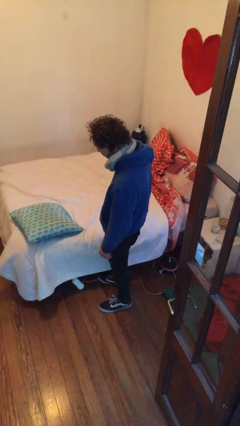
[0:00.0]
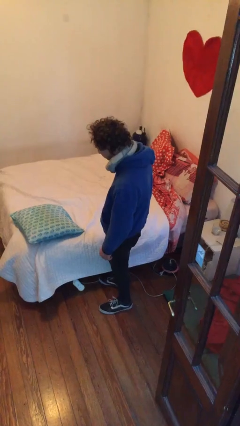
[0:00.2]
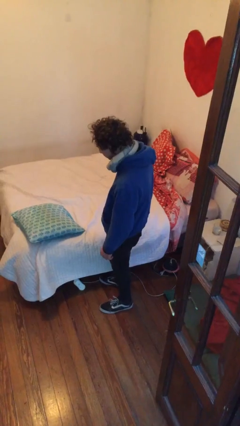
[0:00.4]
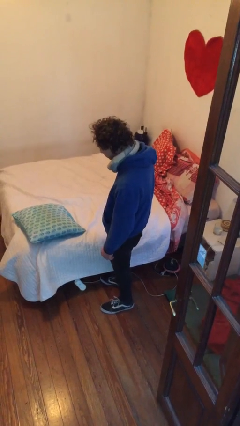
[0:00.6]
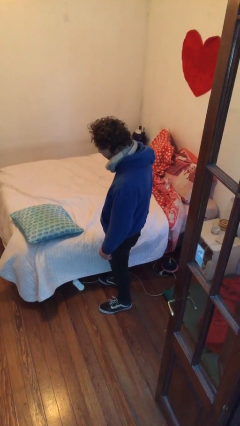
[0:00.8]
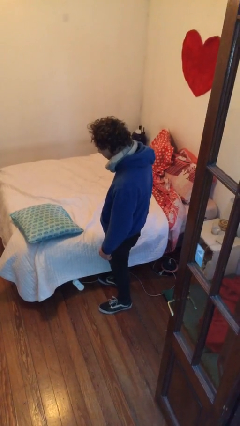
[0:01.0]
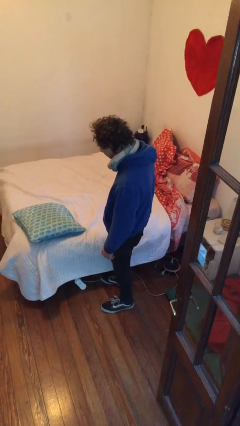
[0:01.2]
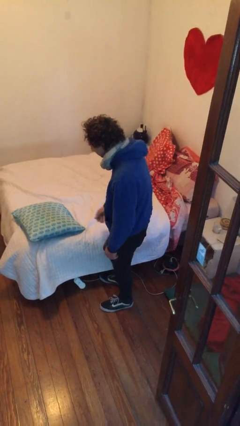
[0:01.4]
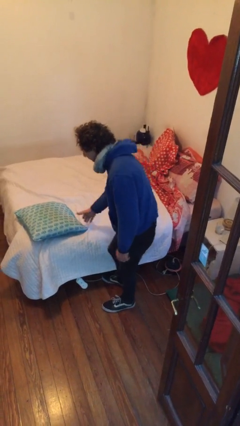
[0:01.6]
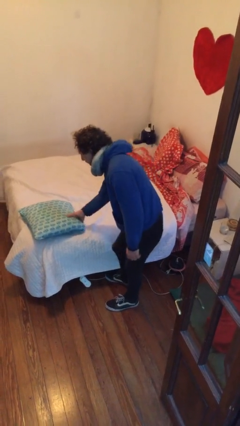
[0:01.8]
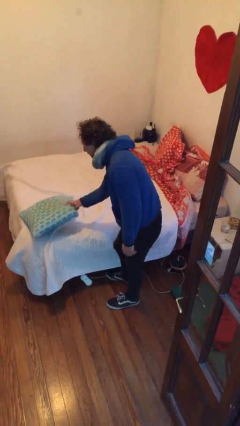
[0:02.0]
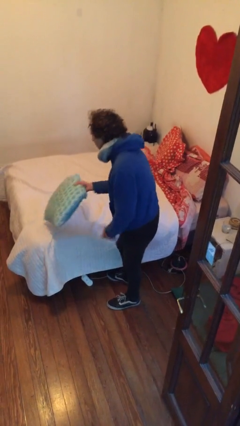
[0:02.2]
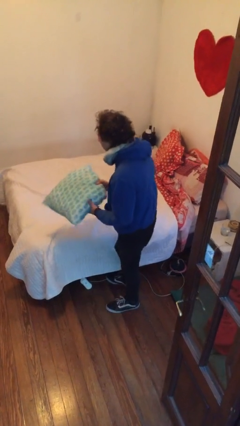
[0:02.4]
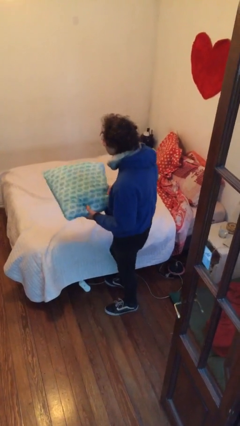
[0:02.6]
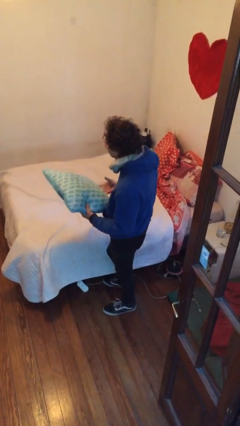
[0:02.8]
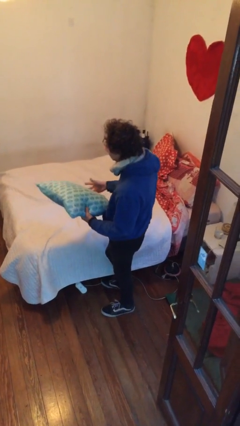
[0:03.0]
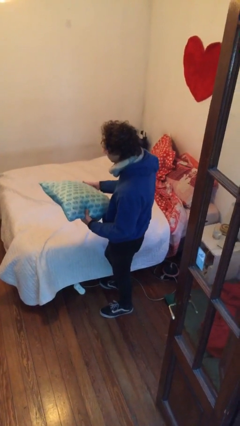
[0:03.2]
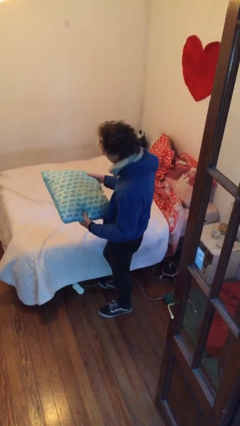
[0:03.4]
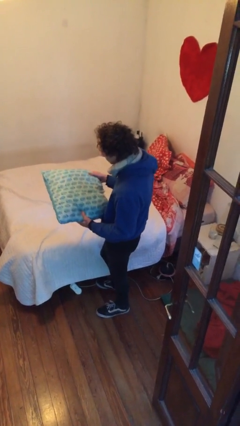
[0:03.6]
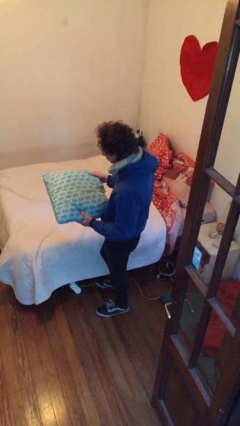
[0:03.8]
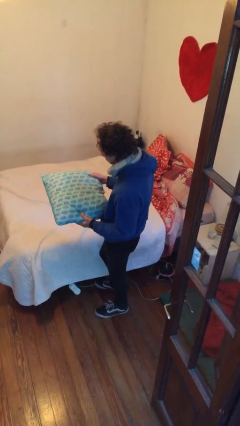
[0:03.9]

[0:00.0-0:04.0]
person picks up object from bed

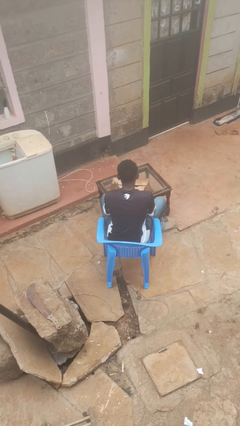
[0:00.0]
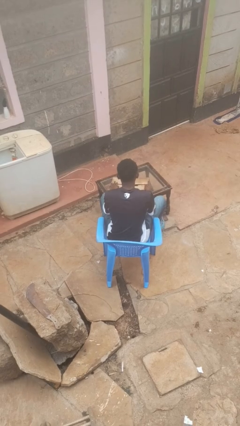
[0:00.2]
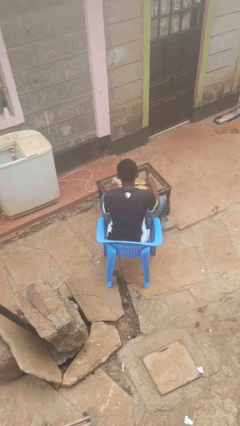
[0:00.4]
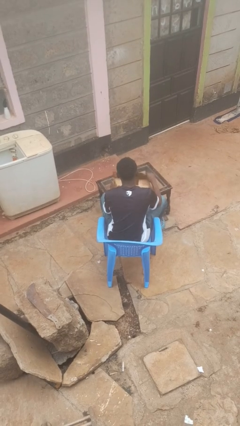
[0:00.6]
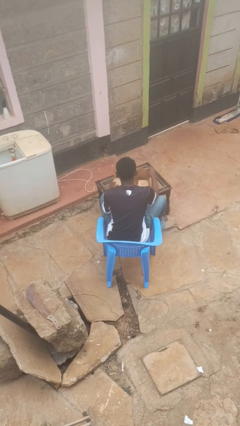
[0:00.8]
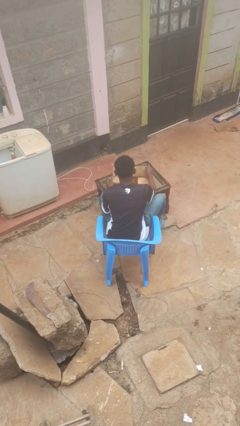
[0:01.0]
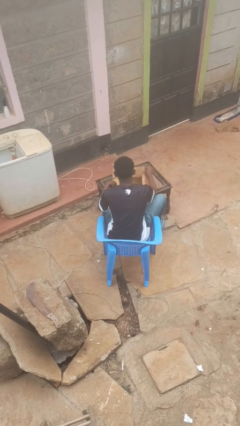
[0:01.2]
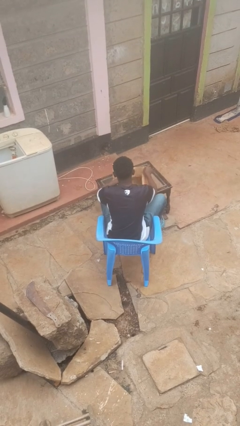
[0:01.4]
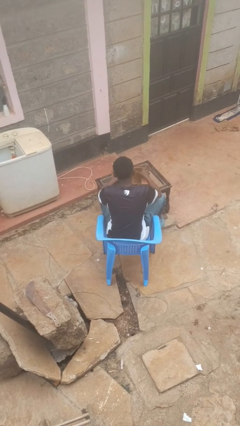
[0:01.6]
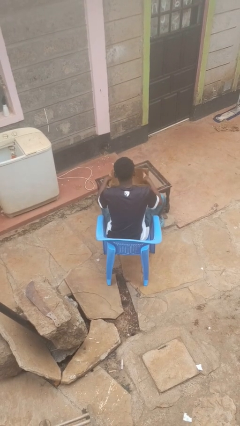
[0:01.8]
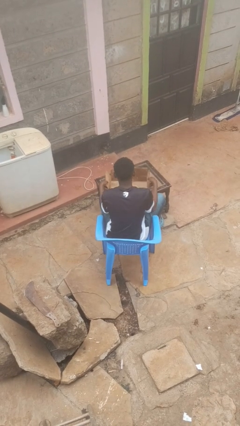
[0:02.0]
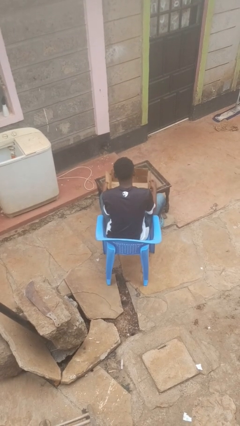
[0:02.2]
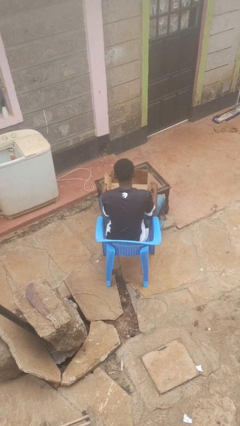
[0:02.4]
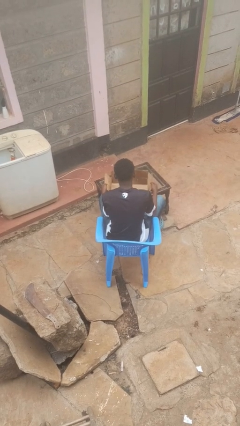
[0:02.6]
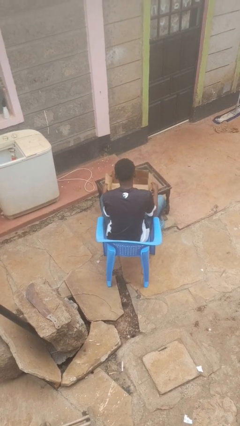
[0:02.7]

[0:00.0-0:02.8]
person opens box

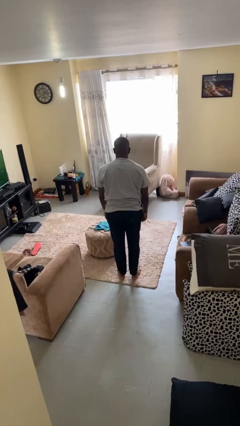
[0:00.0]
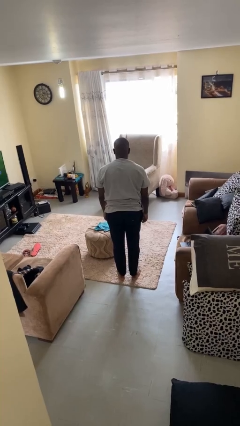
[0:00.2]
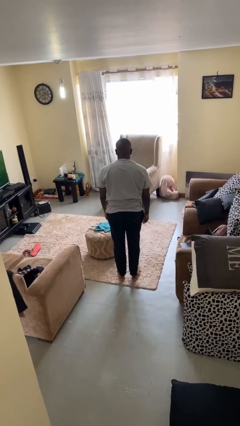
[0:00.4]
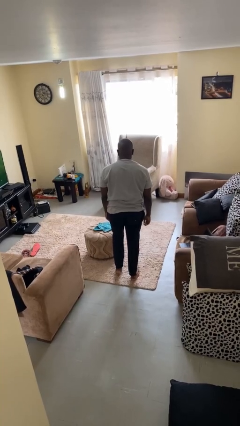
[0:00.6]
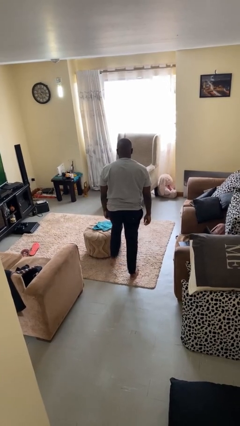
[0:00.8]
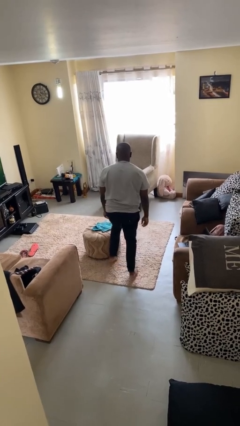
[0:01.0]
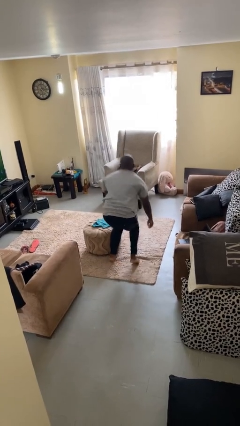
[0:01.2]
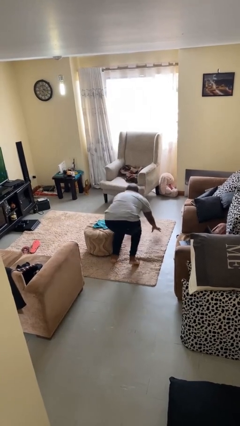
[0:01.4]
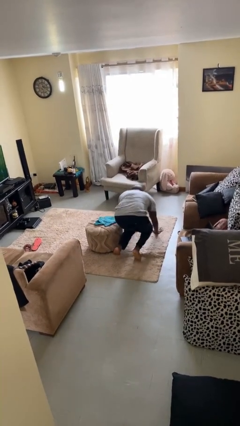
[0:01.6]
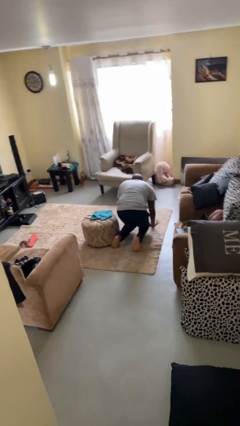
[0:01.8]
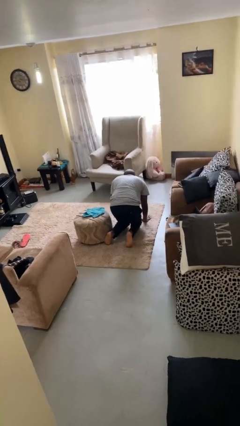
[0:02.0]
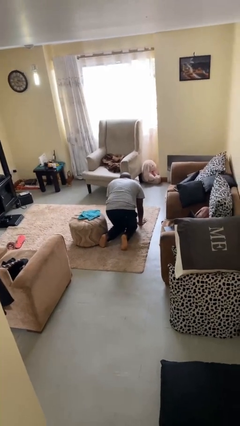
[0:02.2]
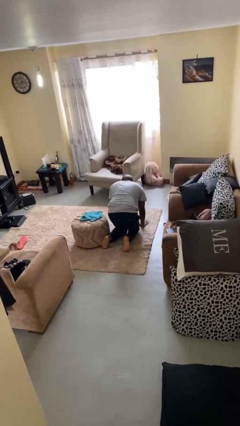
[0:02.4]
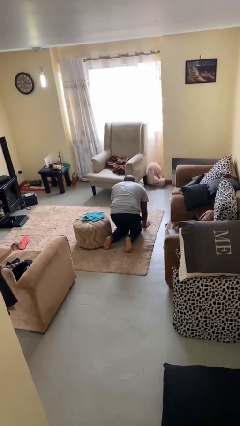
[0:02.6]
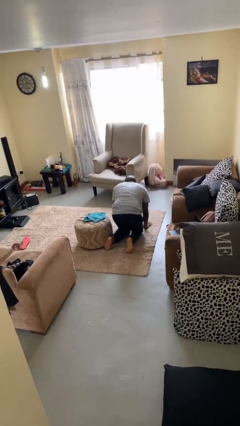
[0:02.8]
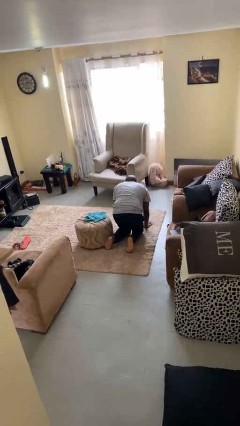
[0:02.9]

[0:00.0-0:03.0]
person trips on object on floor

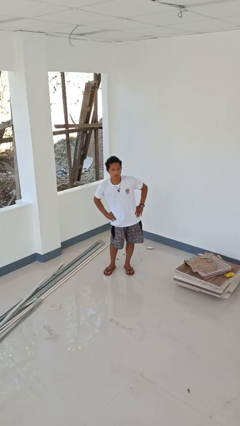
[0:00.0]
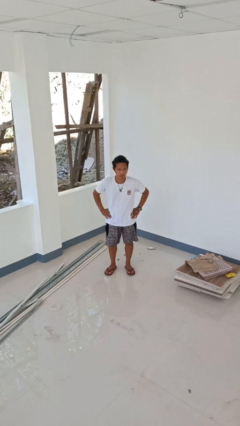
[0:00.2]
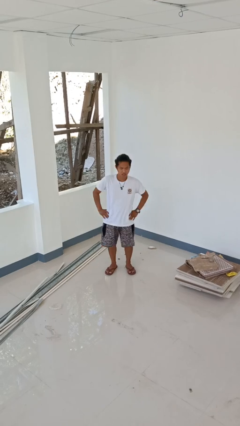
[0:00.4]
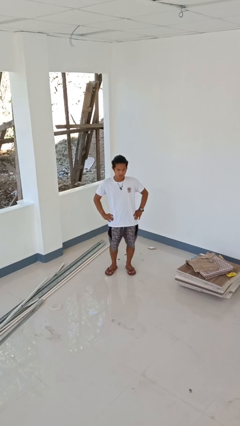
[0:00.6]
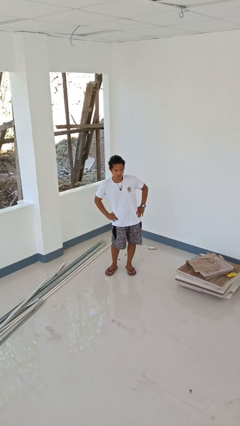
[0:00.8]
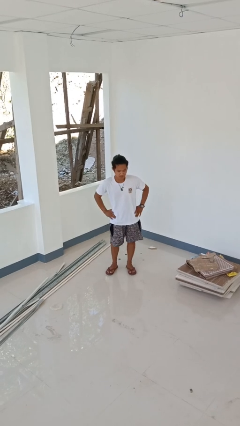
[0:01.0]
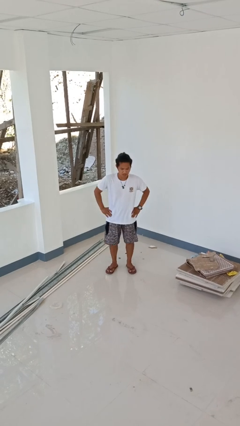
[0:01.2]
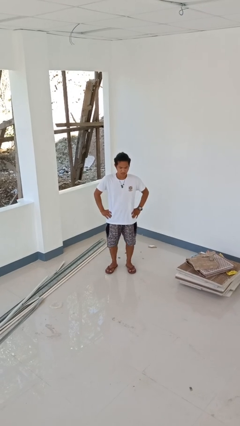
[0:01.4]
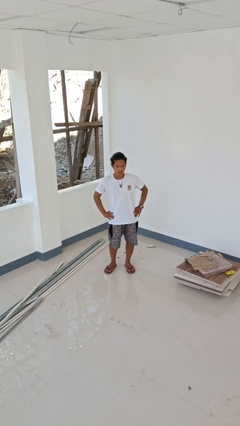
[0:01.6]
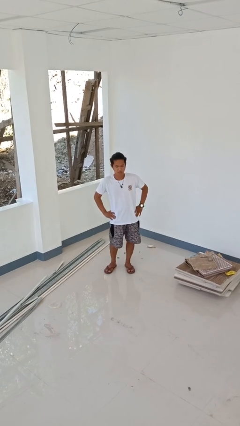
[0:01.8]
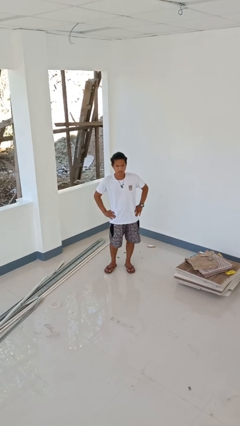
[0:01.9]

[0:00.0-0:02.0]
person wiggles hips

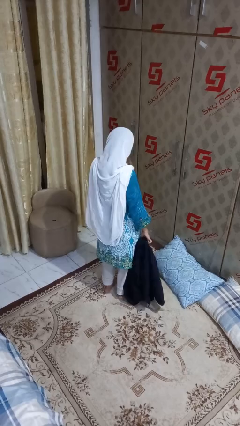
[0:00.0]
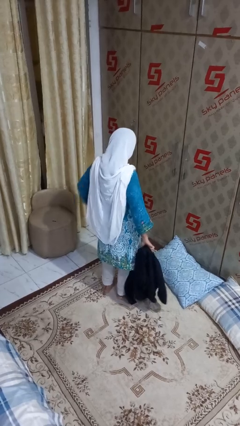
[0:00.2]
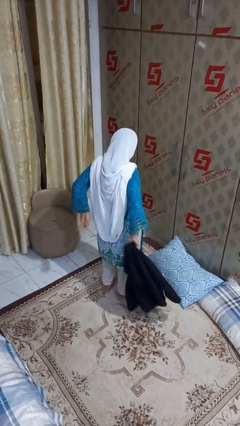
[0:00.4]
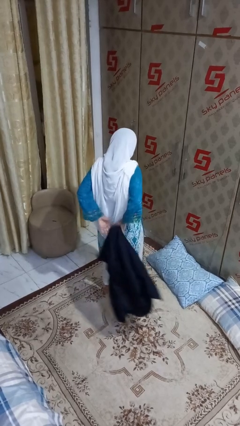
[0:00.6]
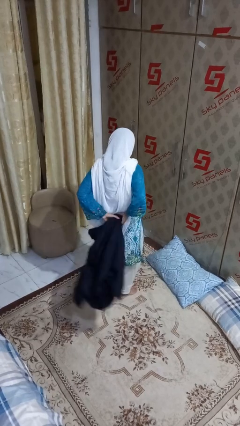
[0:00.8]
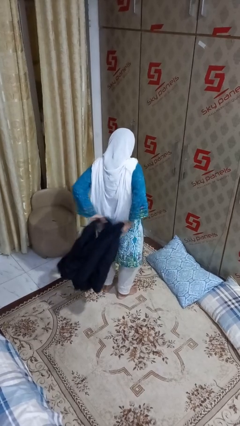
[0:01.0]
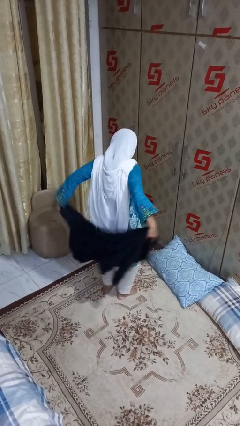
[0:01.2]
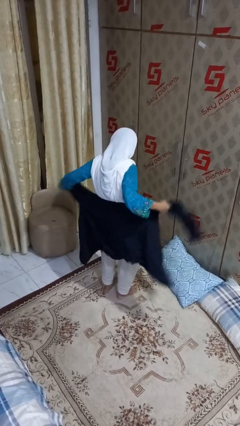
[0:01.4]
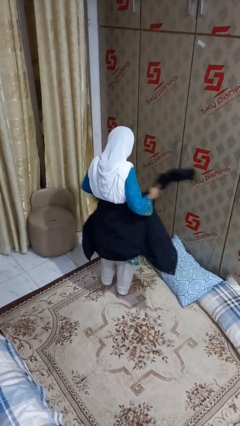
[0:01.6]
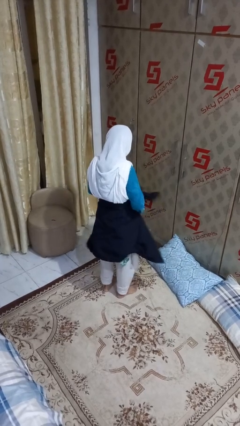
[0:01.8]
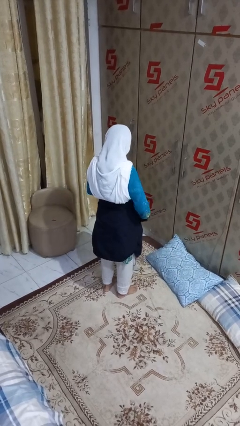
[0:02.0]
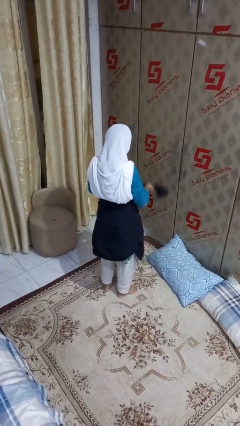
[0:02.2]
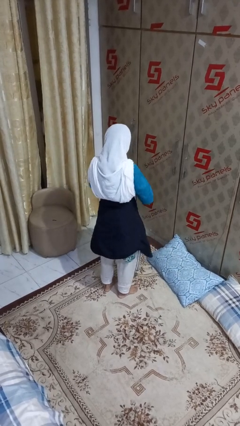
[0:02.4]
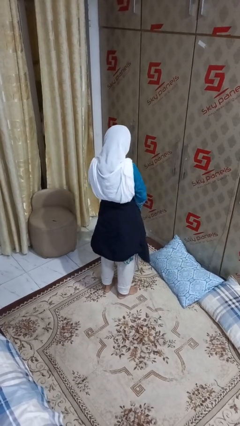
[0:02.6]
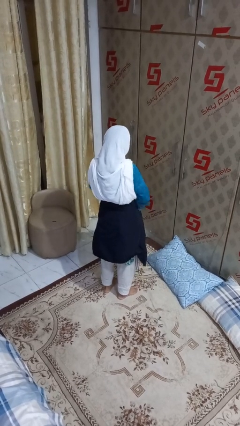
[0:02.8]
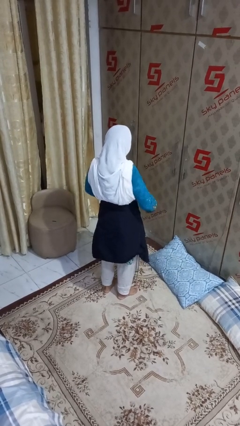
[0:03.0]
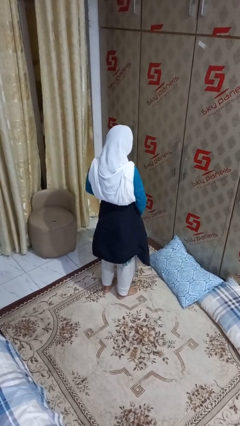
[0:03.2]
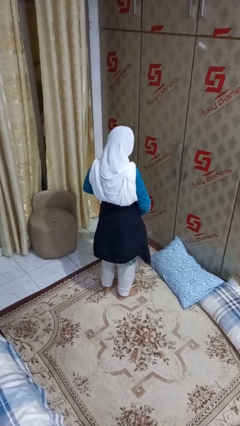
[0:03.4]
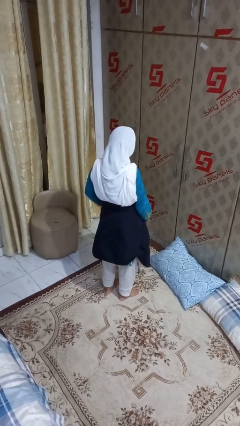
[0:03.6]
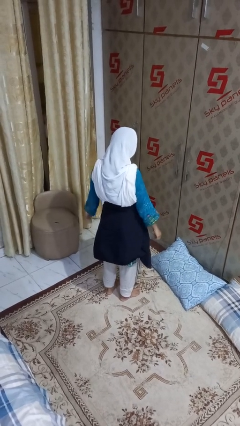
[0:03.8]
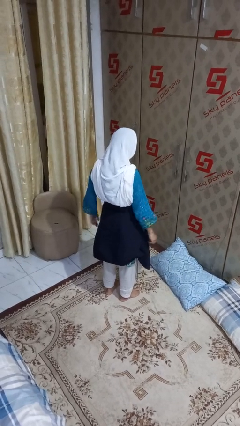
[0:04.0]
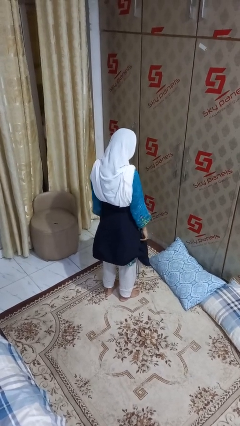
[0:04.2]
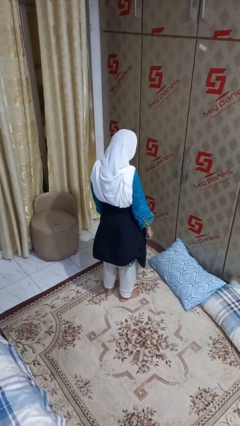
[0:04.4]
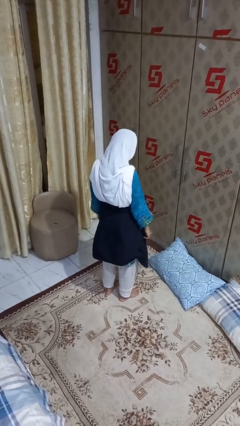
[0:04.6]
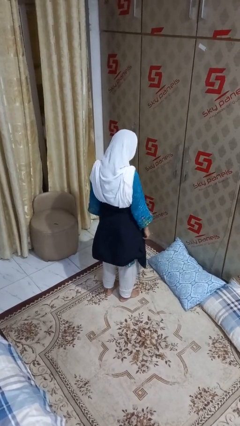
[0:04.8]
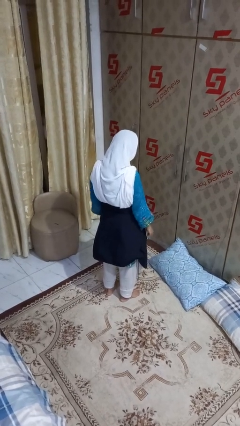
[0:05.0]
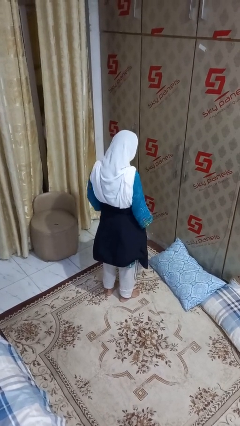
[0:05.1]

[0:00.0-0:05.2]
person ties jacket around waist

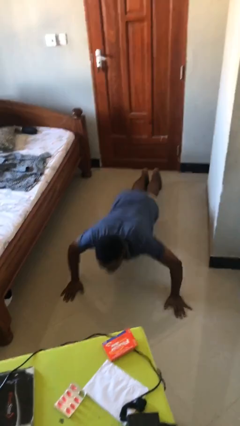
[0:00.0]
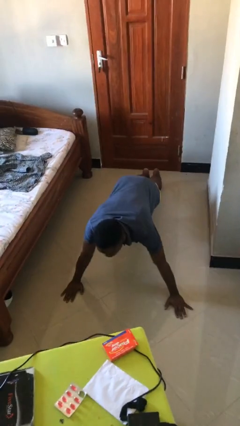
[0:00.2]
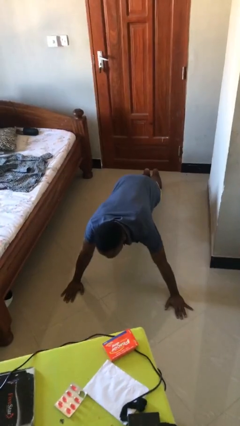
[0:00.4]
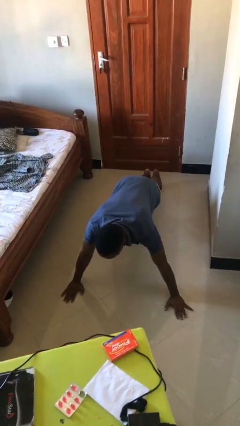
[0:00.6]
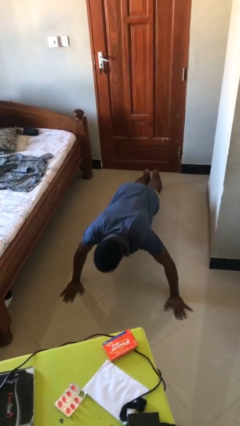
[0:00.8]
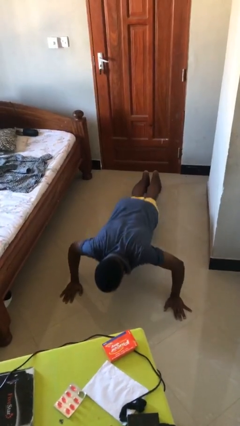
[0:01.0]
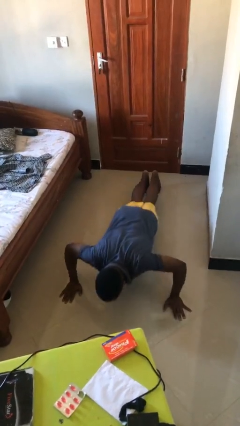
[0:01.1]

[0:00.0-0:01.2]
person exercises with pushup
